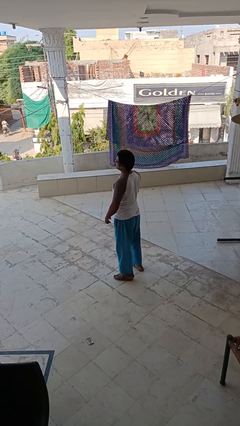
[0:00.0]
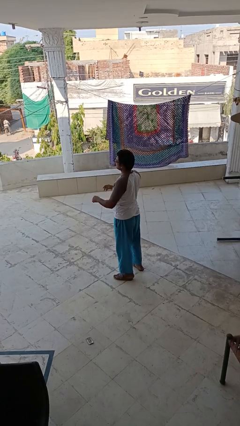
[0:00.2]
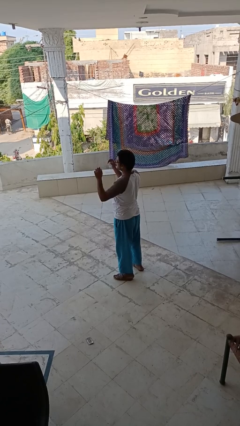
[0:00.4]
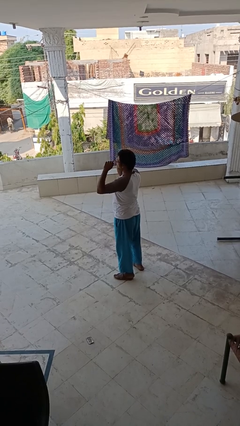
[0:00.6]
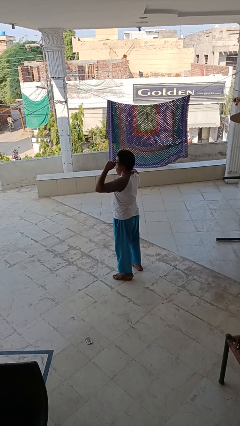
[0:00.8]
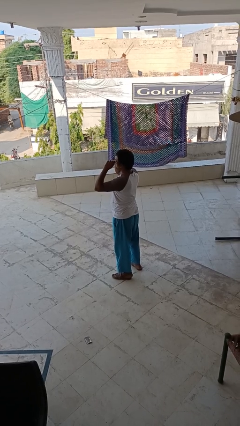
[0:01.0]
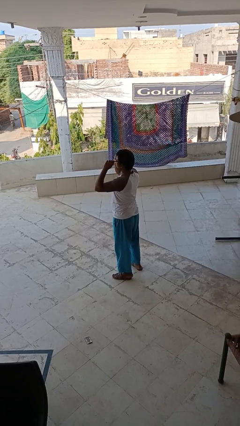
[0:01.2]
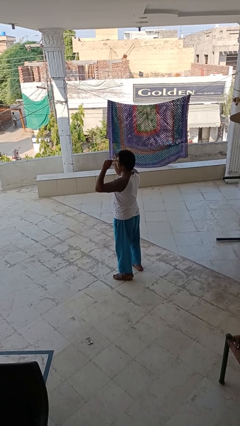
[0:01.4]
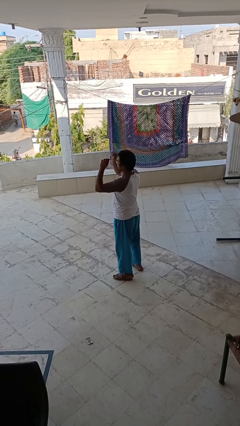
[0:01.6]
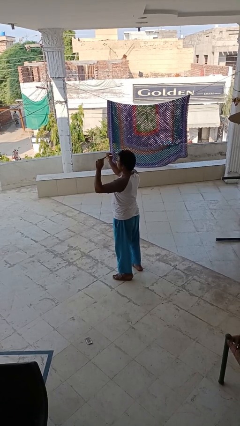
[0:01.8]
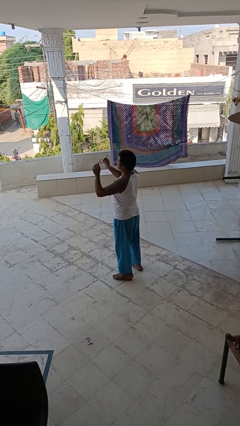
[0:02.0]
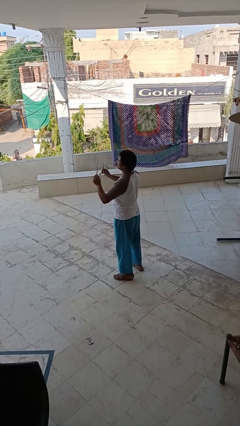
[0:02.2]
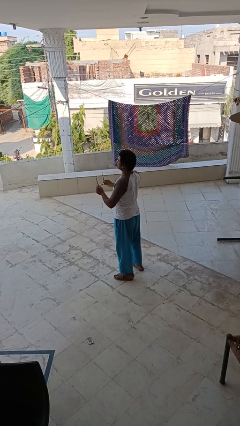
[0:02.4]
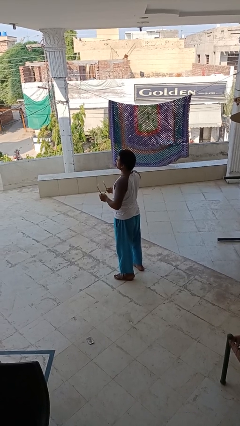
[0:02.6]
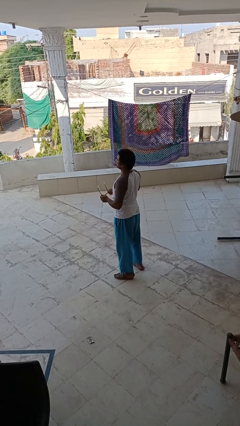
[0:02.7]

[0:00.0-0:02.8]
person takes off glasses

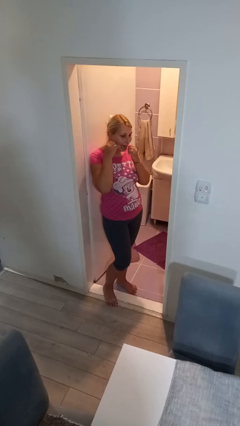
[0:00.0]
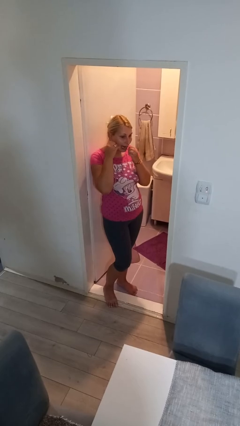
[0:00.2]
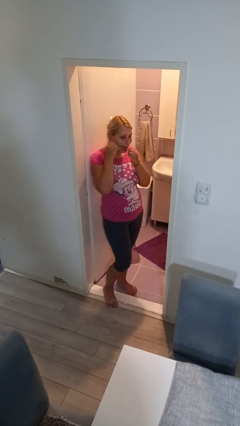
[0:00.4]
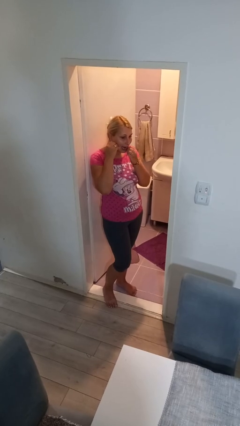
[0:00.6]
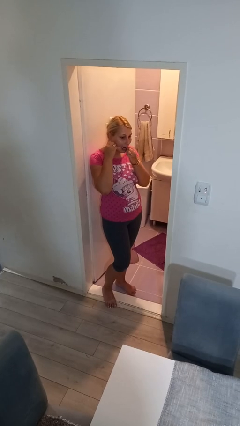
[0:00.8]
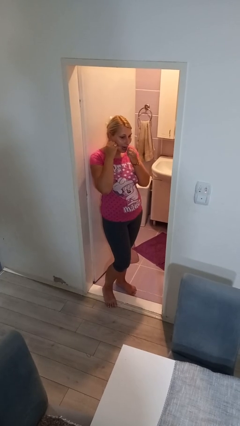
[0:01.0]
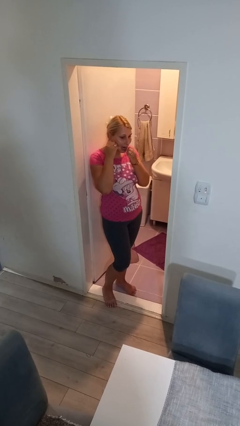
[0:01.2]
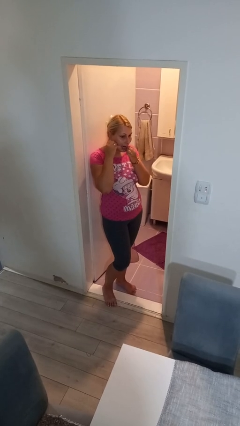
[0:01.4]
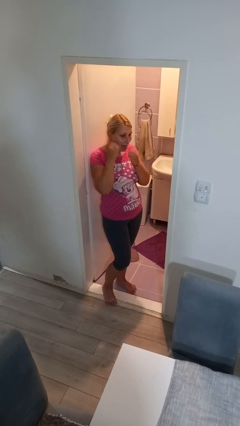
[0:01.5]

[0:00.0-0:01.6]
person flosses

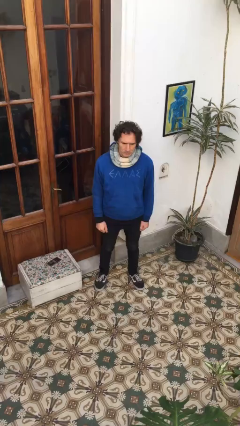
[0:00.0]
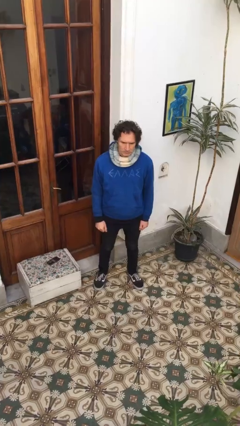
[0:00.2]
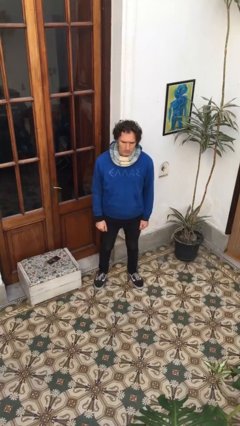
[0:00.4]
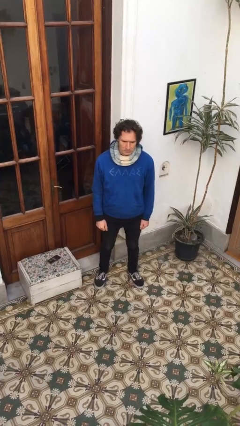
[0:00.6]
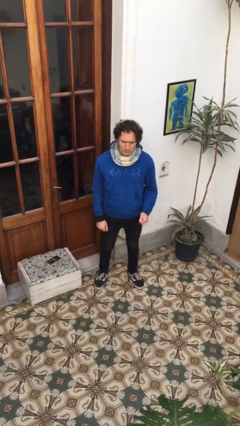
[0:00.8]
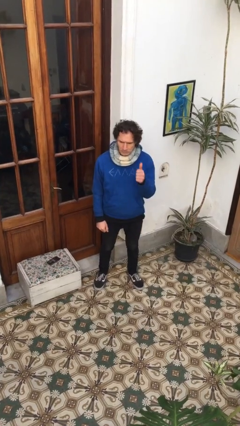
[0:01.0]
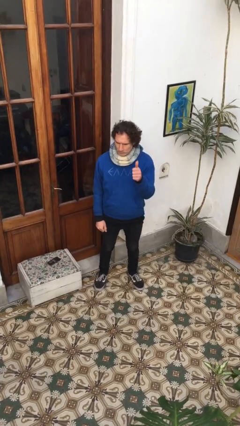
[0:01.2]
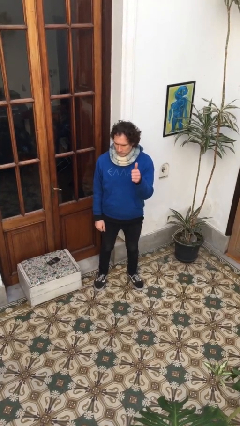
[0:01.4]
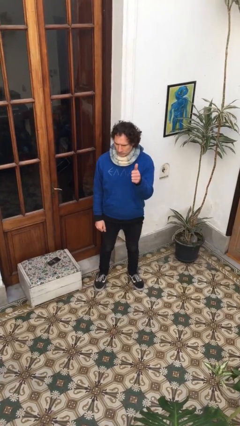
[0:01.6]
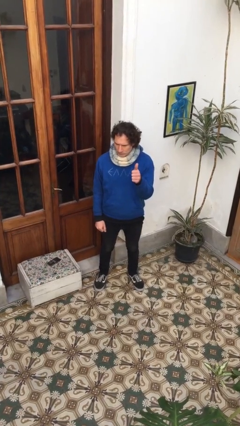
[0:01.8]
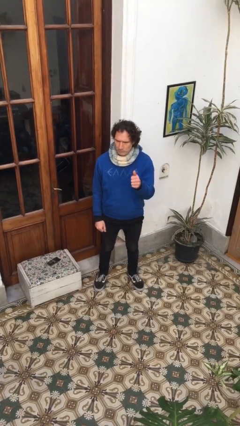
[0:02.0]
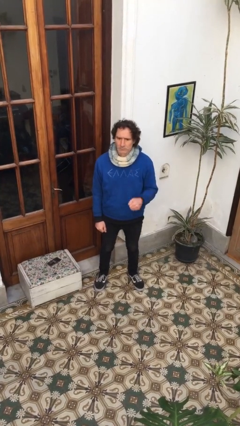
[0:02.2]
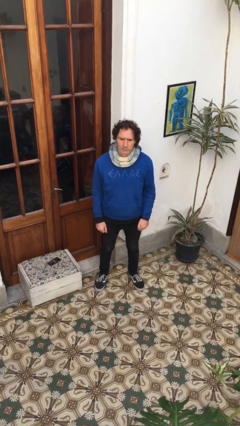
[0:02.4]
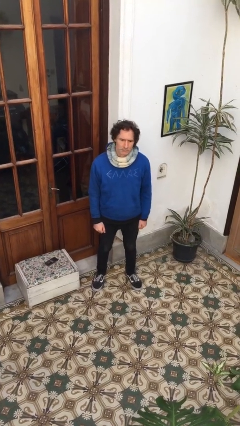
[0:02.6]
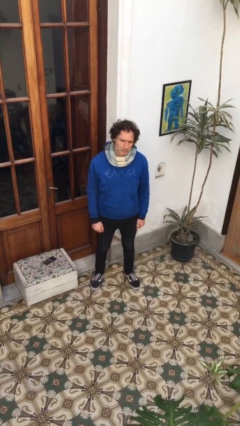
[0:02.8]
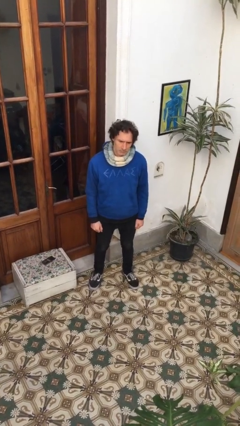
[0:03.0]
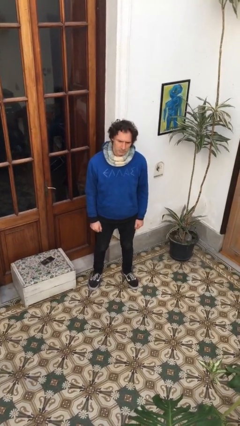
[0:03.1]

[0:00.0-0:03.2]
person gestures thumbs up

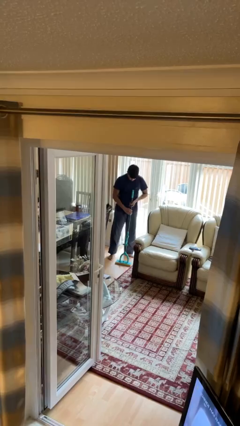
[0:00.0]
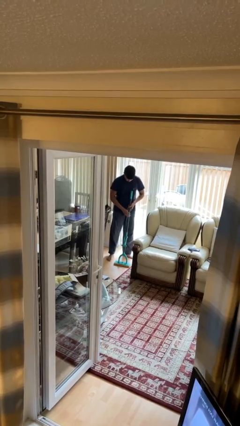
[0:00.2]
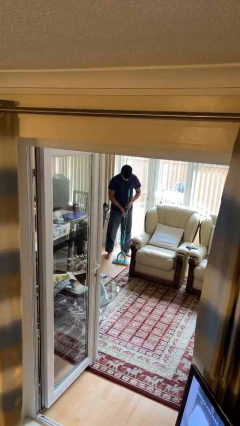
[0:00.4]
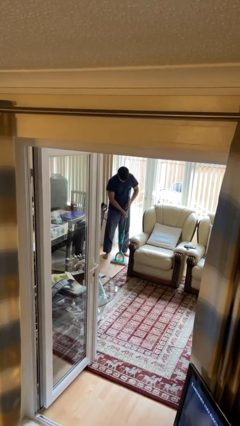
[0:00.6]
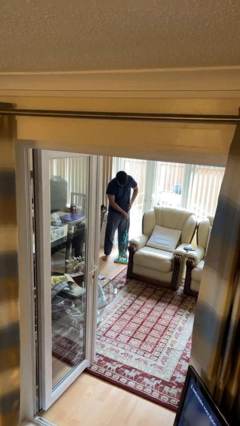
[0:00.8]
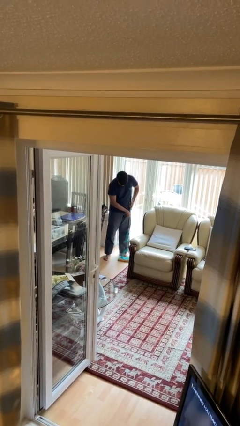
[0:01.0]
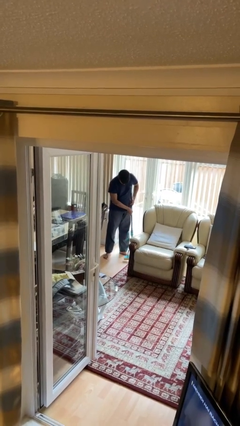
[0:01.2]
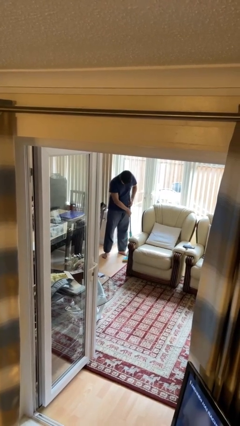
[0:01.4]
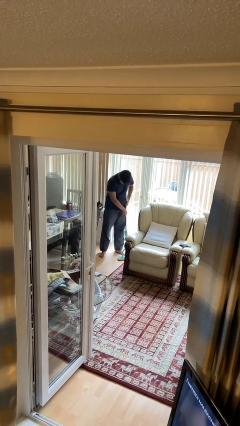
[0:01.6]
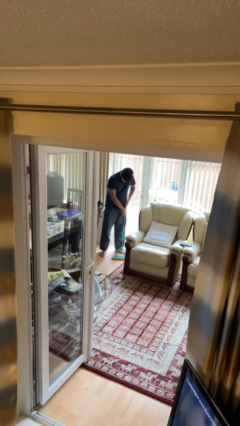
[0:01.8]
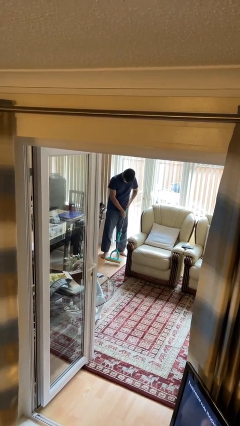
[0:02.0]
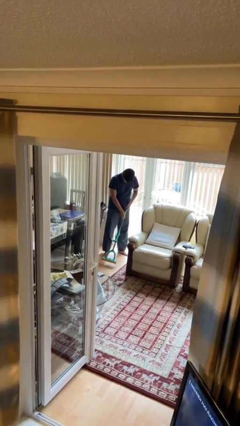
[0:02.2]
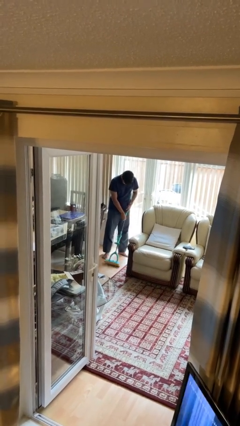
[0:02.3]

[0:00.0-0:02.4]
person mops

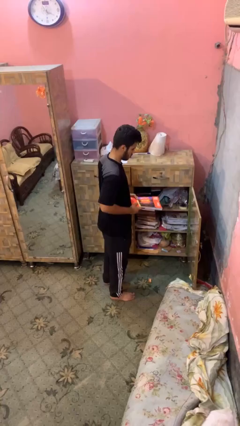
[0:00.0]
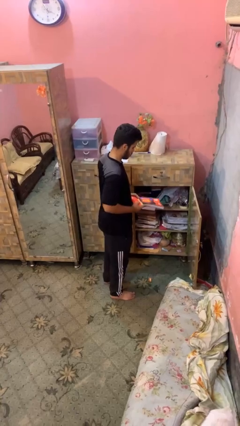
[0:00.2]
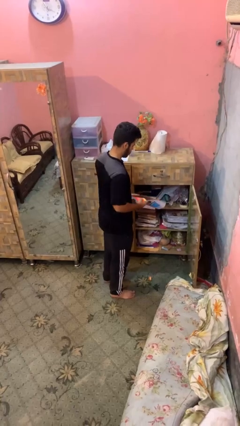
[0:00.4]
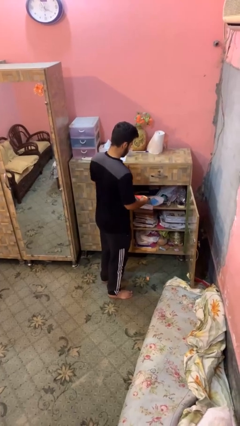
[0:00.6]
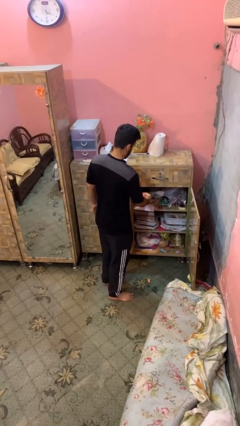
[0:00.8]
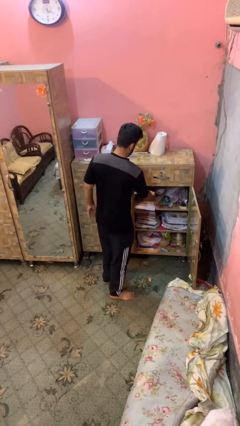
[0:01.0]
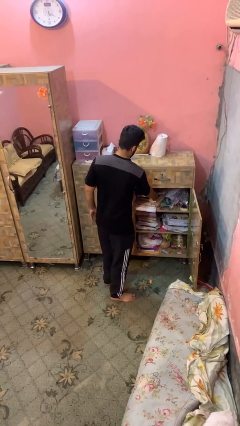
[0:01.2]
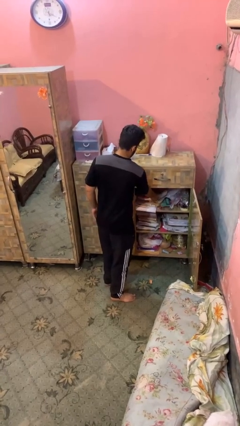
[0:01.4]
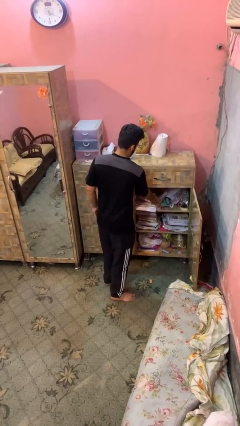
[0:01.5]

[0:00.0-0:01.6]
person puts down object into cabinet

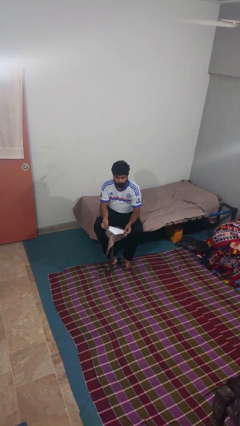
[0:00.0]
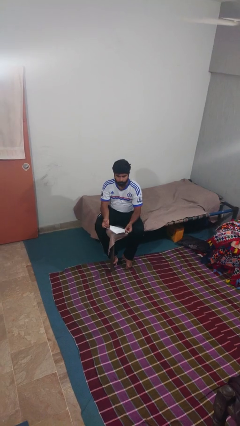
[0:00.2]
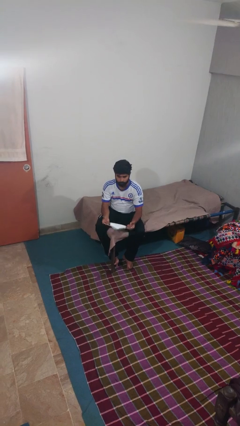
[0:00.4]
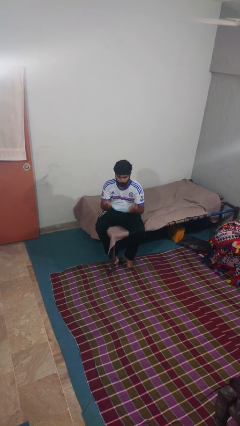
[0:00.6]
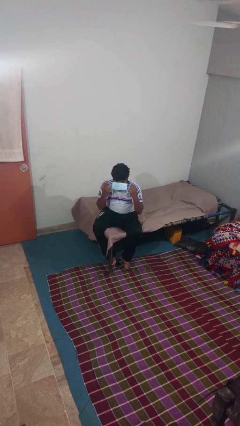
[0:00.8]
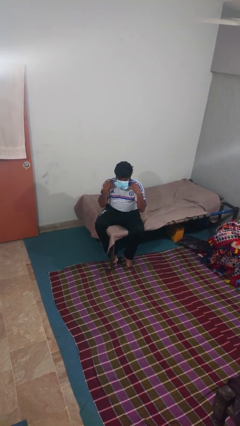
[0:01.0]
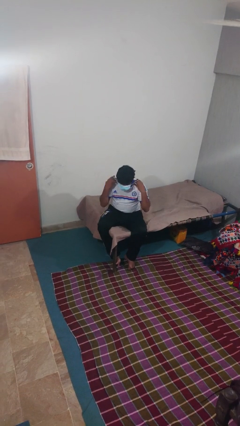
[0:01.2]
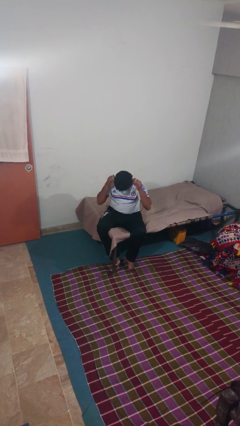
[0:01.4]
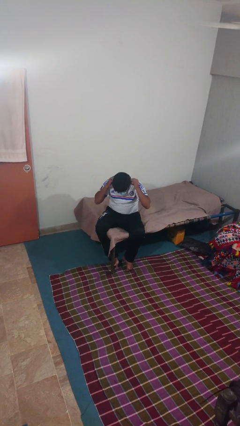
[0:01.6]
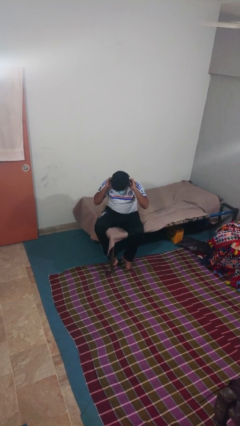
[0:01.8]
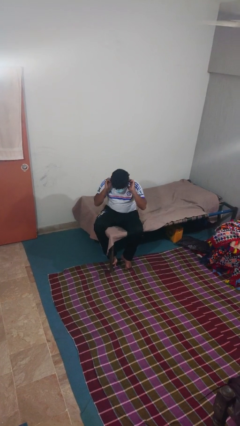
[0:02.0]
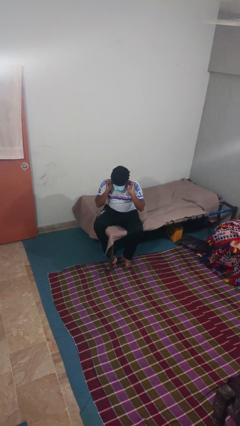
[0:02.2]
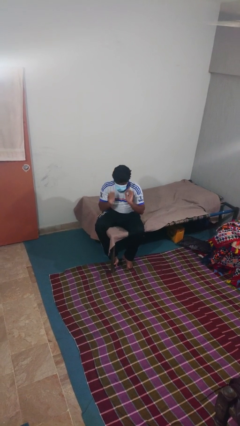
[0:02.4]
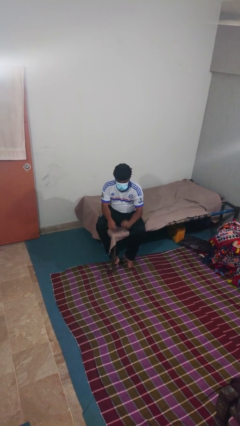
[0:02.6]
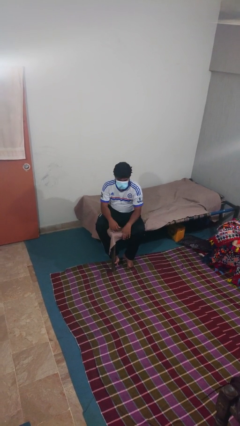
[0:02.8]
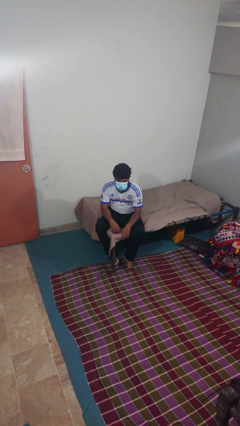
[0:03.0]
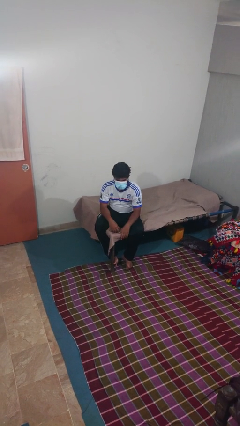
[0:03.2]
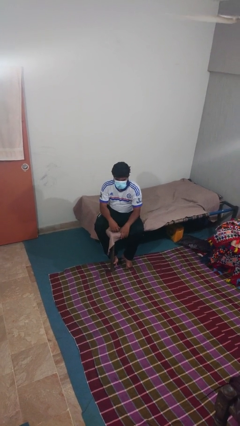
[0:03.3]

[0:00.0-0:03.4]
person puts on facemask

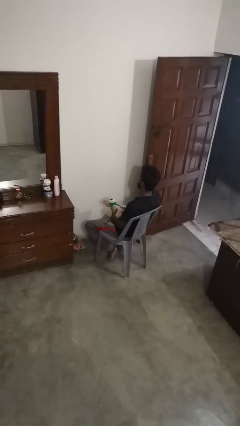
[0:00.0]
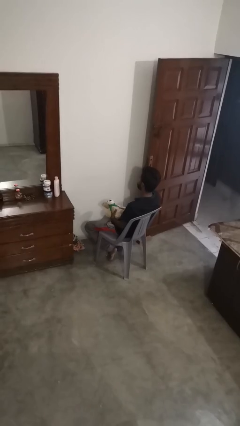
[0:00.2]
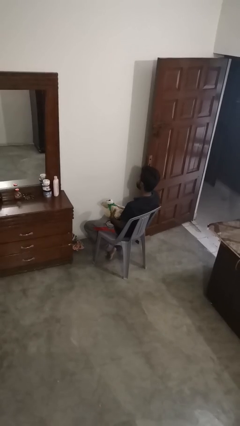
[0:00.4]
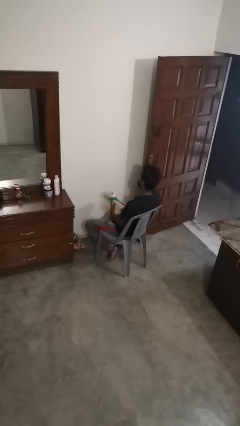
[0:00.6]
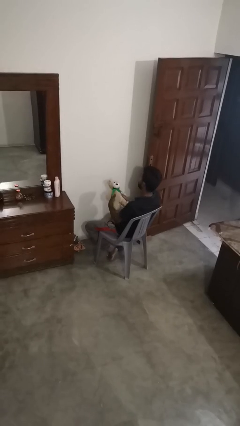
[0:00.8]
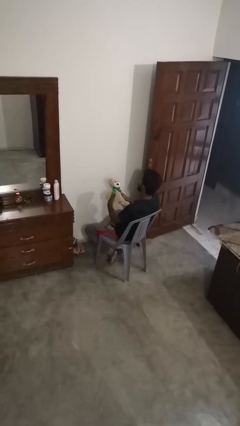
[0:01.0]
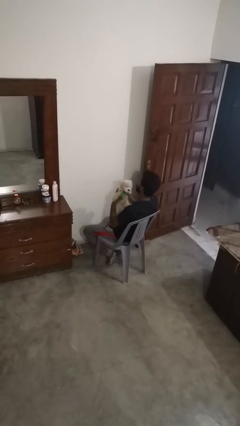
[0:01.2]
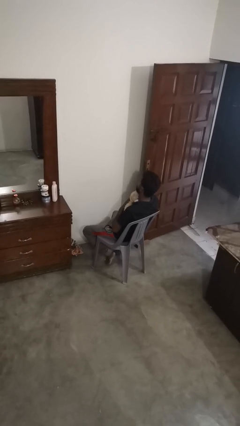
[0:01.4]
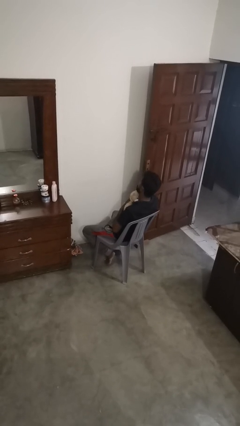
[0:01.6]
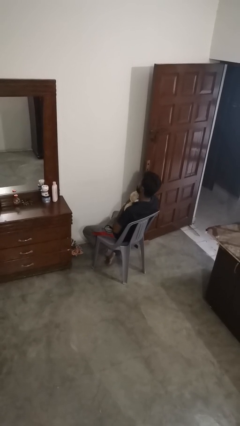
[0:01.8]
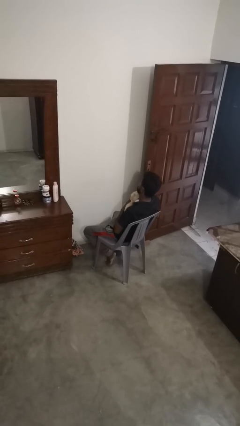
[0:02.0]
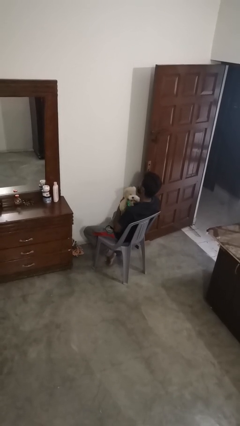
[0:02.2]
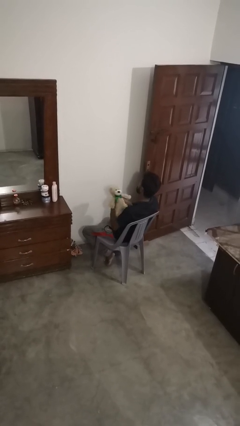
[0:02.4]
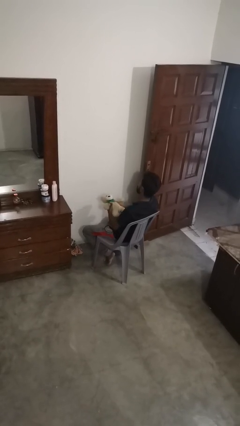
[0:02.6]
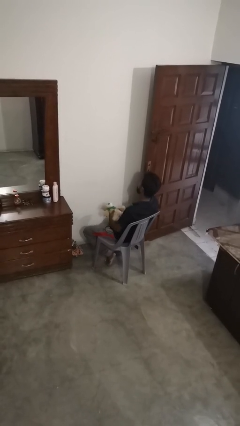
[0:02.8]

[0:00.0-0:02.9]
person hugs stuffed animal
